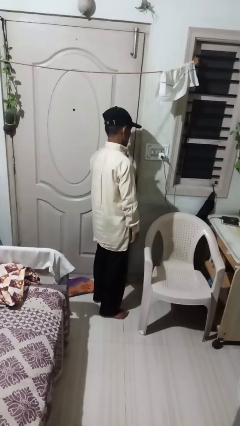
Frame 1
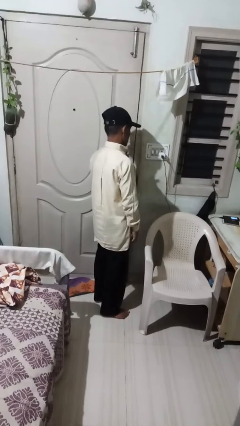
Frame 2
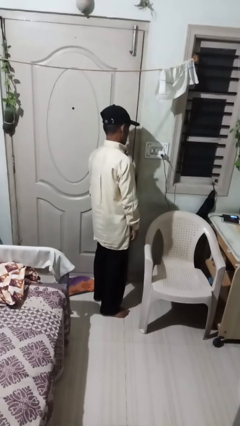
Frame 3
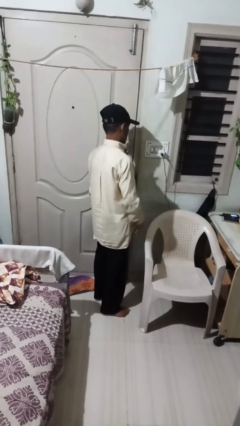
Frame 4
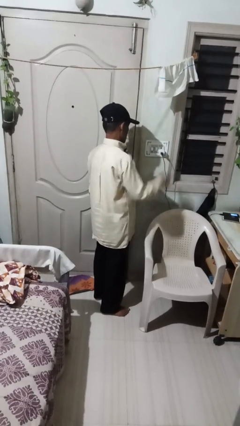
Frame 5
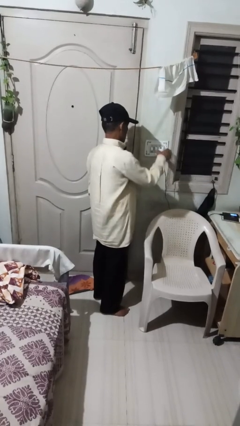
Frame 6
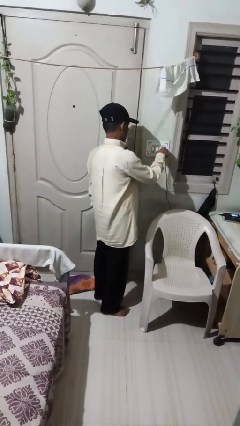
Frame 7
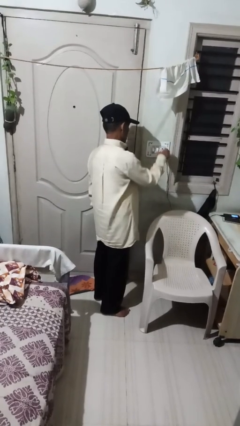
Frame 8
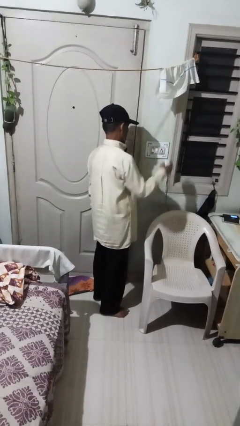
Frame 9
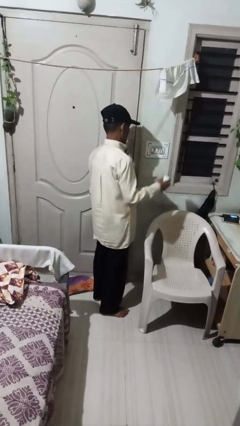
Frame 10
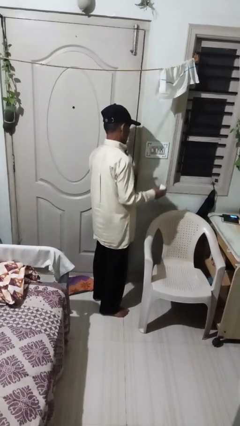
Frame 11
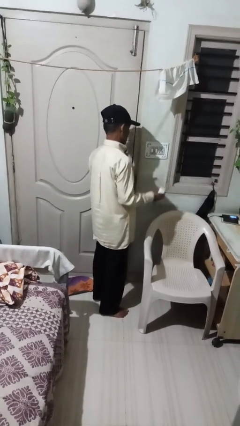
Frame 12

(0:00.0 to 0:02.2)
person unplugs from electrical socket

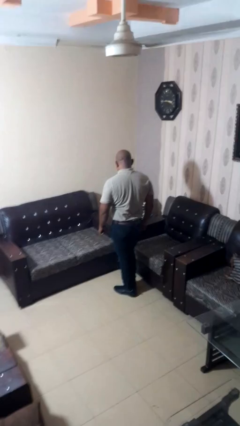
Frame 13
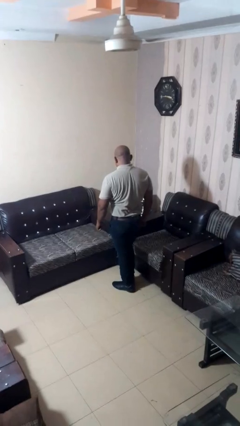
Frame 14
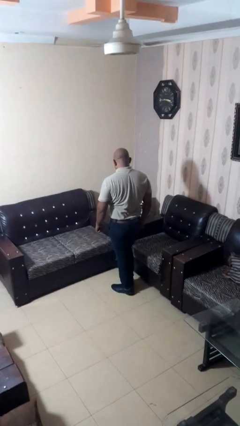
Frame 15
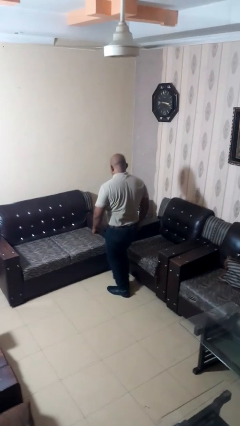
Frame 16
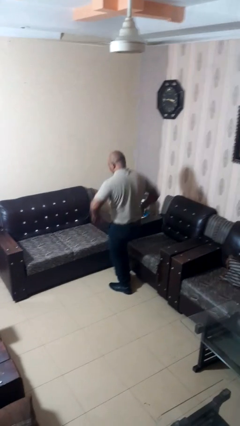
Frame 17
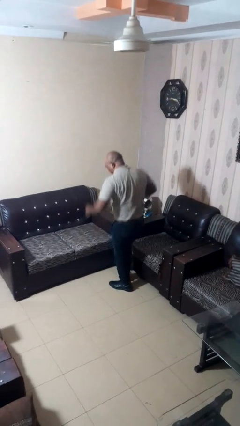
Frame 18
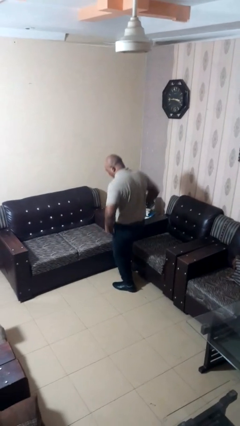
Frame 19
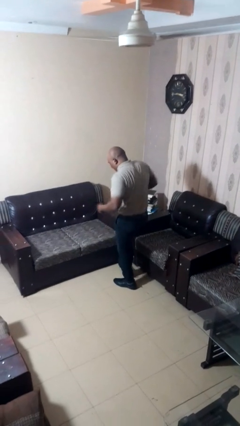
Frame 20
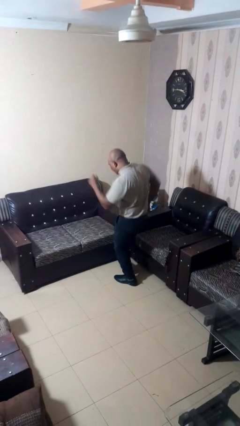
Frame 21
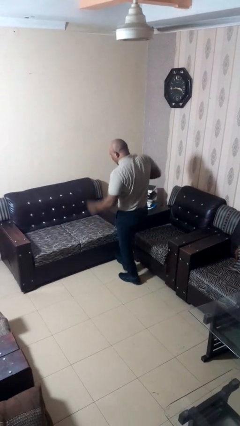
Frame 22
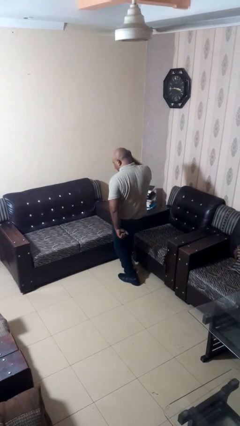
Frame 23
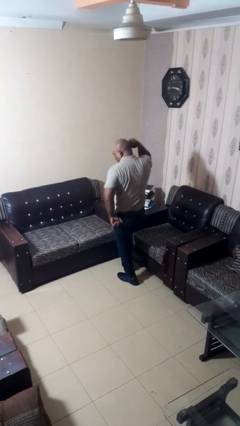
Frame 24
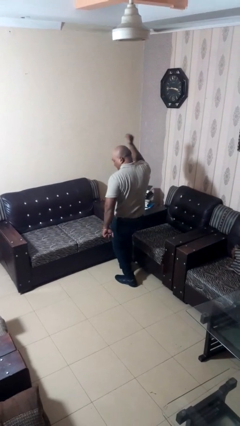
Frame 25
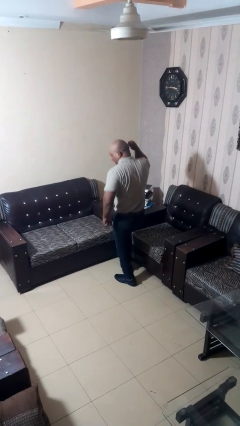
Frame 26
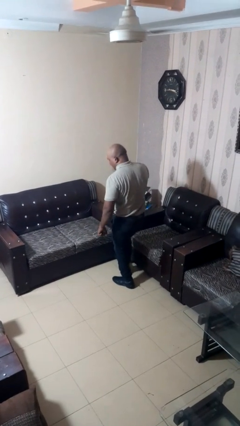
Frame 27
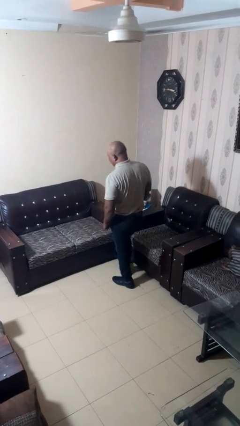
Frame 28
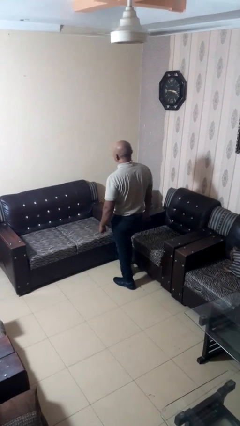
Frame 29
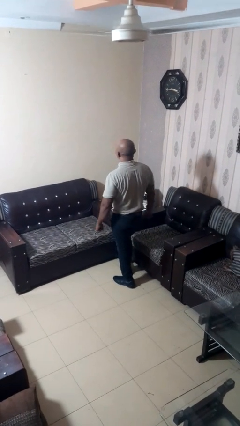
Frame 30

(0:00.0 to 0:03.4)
person dances in place

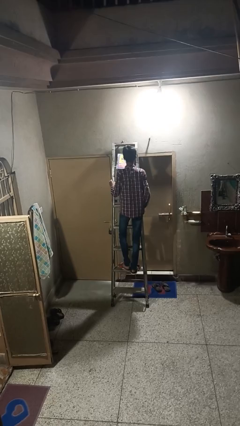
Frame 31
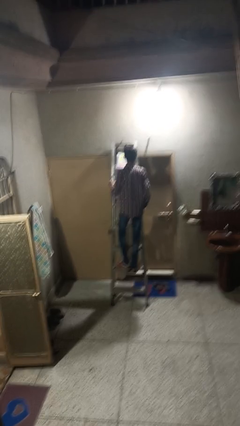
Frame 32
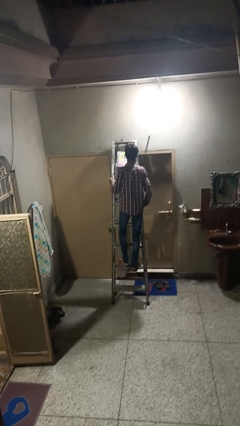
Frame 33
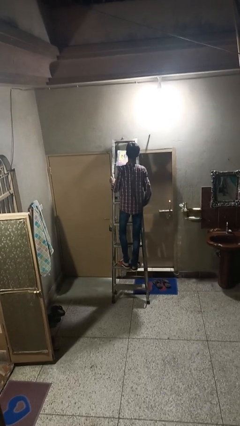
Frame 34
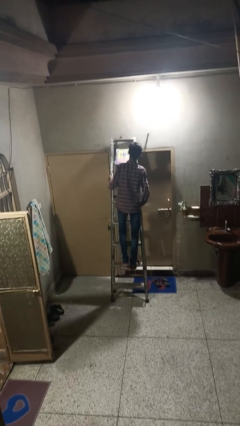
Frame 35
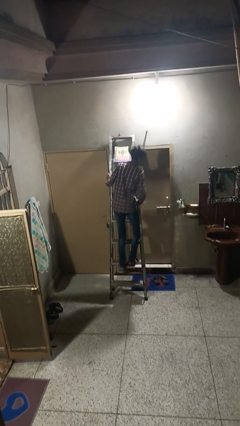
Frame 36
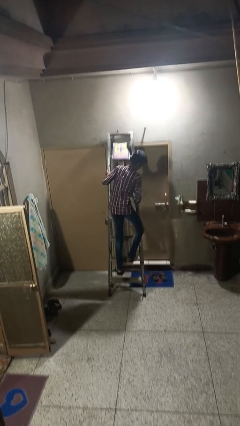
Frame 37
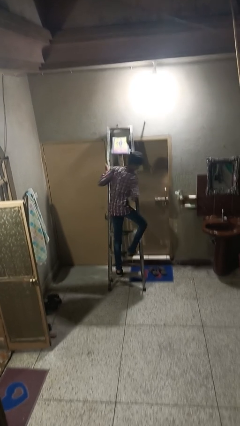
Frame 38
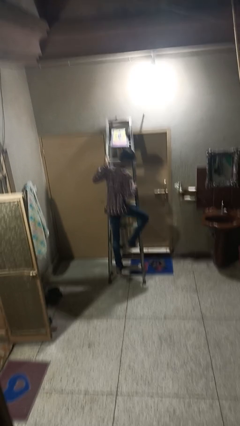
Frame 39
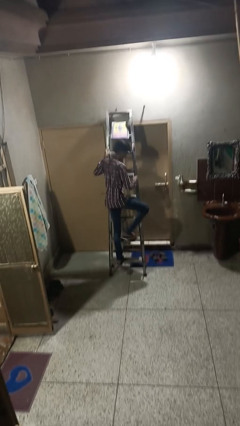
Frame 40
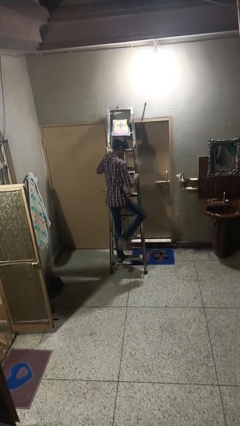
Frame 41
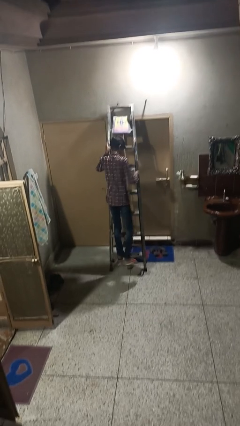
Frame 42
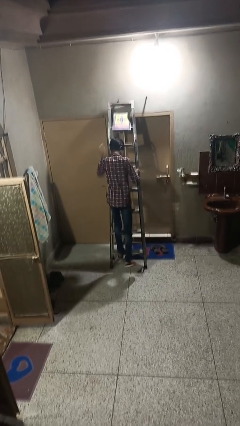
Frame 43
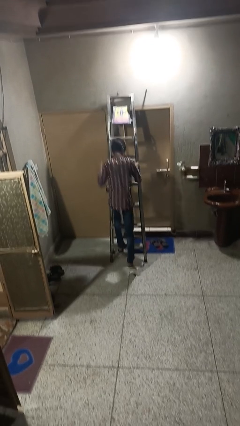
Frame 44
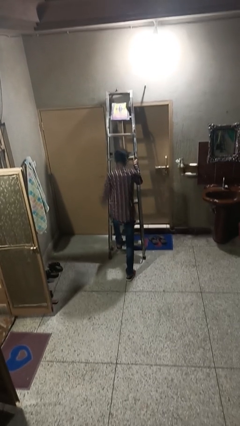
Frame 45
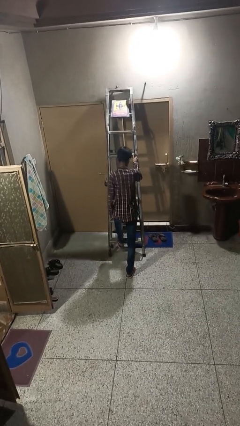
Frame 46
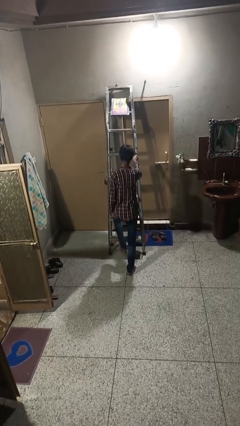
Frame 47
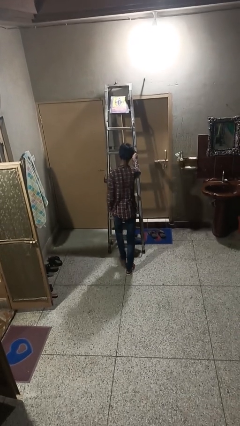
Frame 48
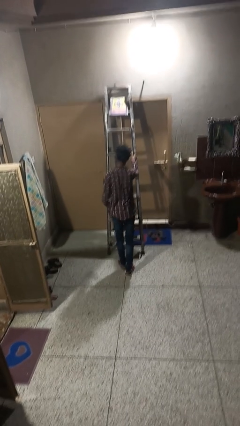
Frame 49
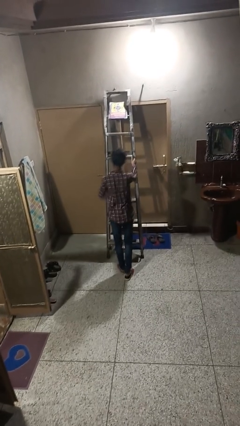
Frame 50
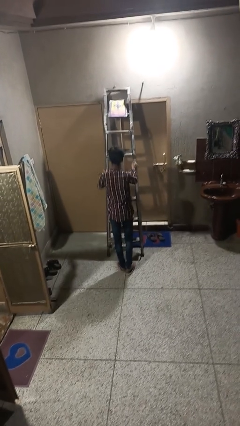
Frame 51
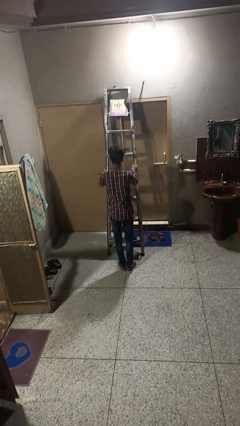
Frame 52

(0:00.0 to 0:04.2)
person climbs down ladder

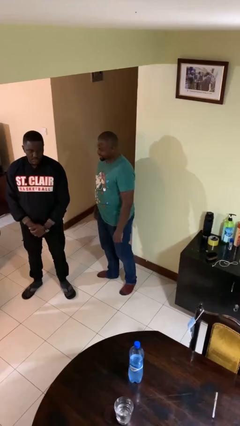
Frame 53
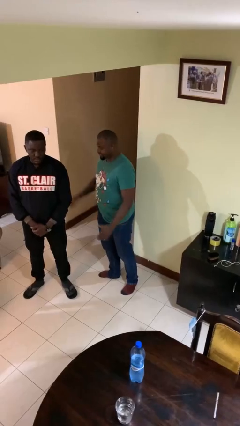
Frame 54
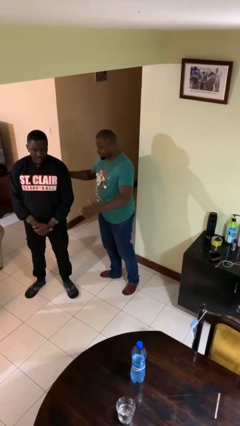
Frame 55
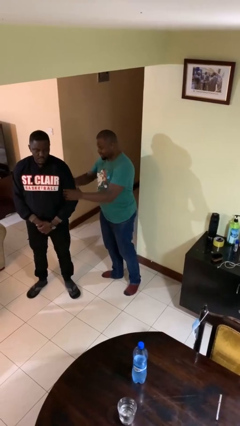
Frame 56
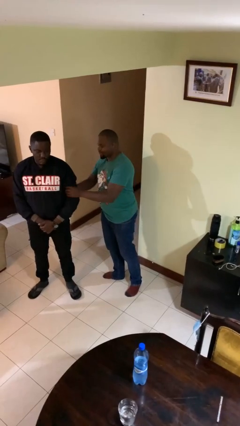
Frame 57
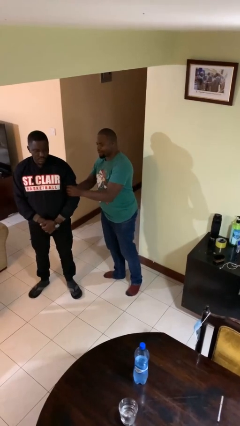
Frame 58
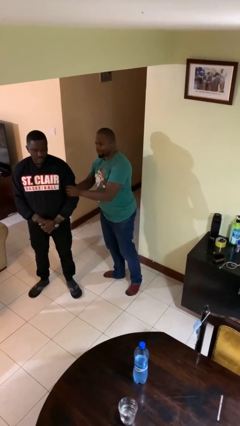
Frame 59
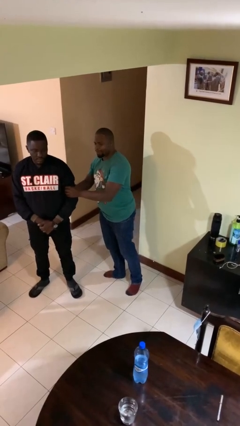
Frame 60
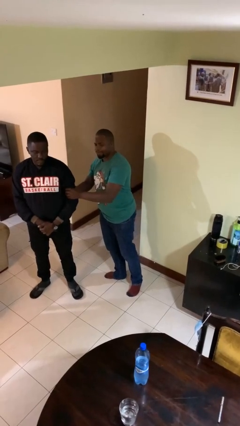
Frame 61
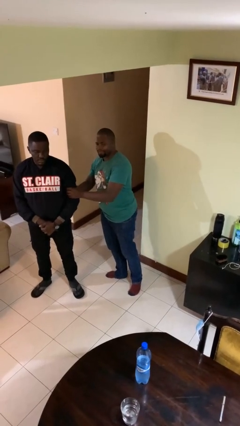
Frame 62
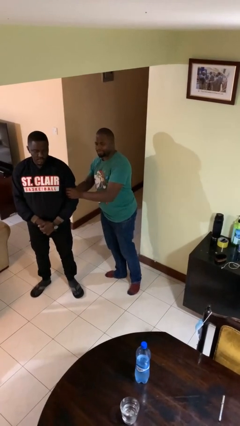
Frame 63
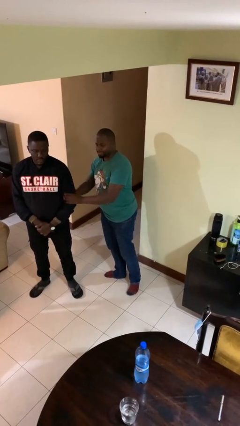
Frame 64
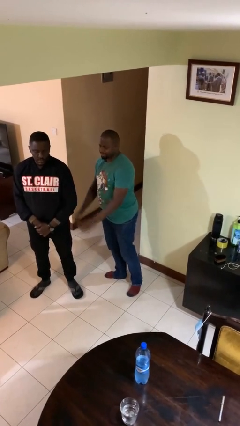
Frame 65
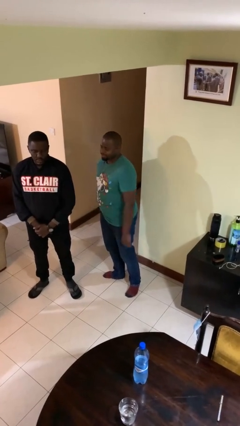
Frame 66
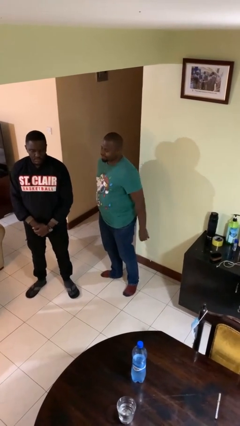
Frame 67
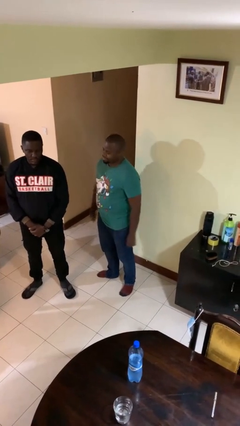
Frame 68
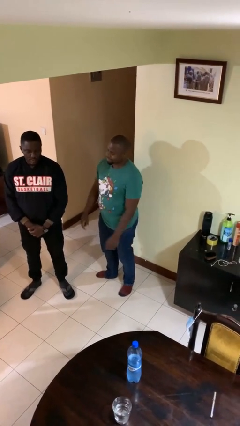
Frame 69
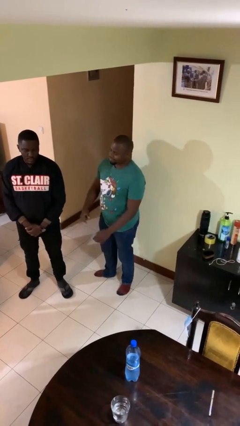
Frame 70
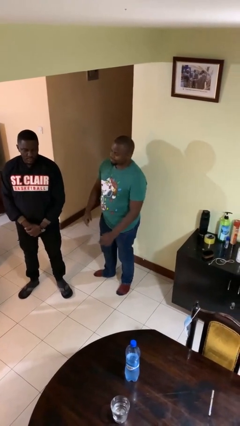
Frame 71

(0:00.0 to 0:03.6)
person grabs person by bicep

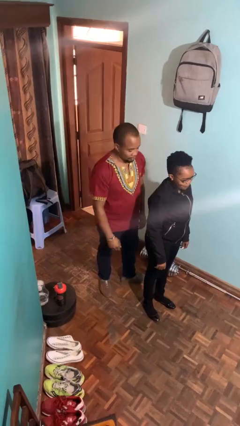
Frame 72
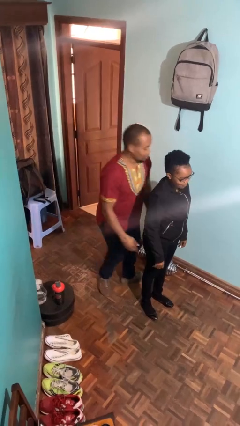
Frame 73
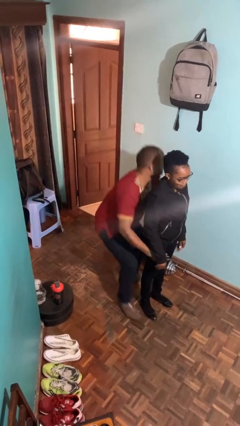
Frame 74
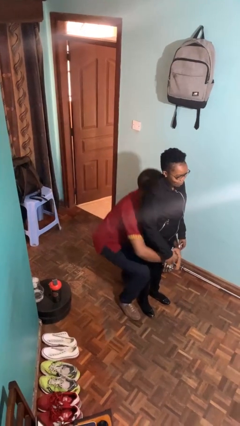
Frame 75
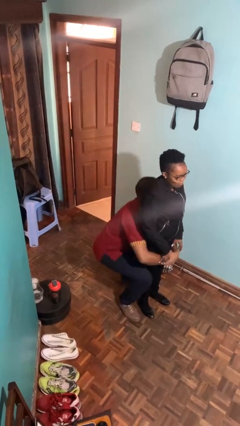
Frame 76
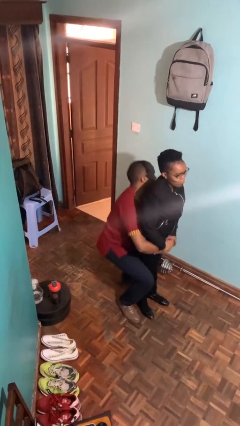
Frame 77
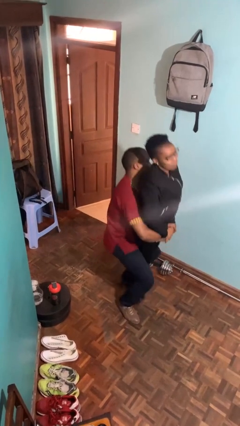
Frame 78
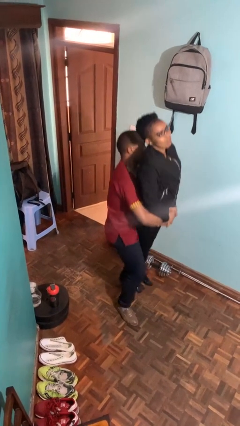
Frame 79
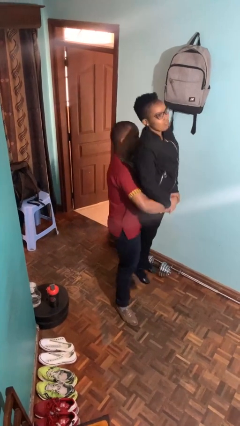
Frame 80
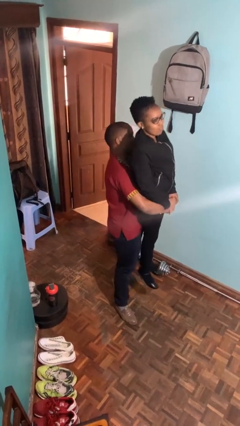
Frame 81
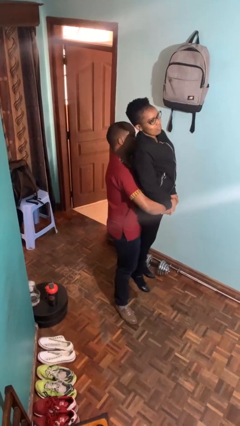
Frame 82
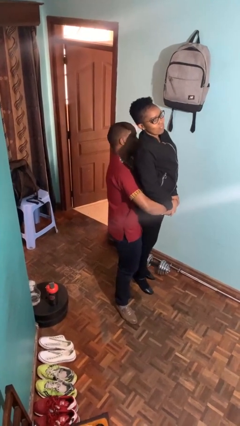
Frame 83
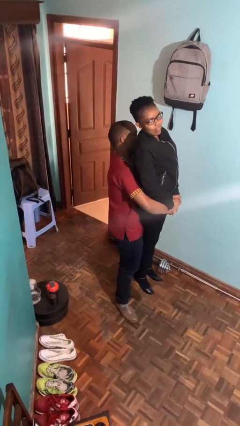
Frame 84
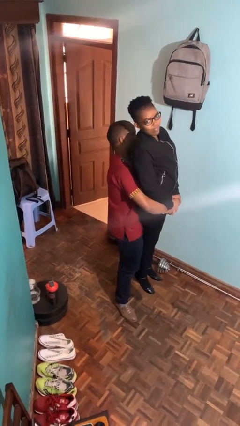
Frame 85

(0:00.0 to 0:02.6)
person picks up person

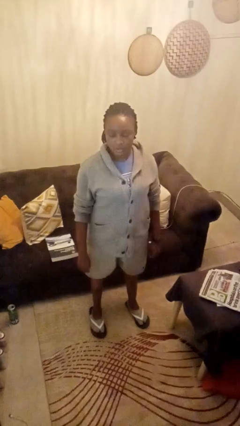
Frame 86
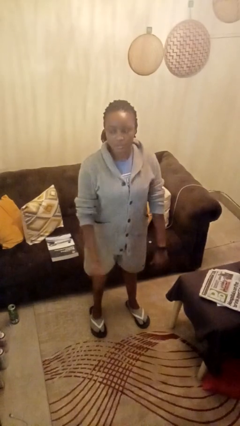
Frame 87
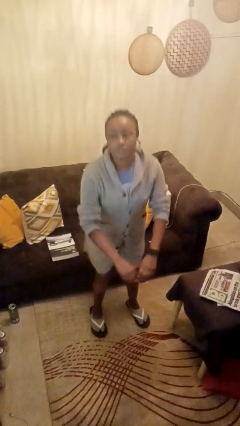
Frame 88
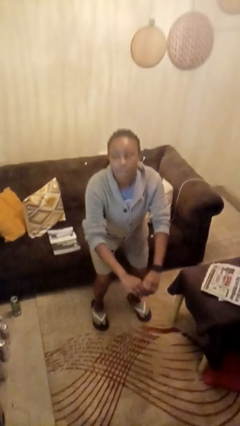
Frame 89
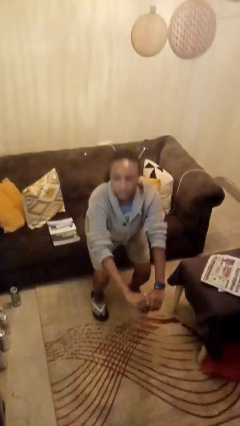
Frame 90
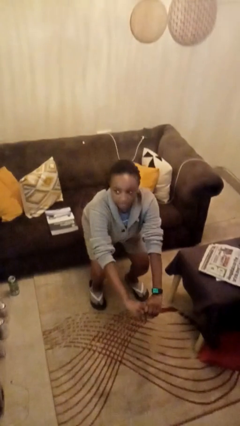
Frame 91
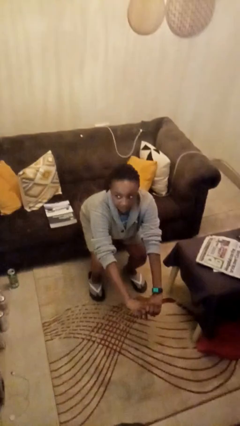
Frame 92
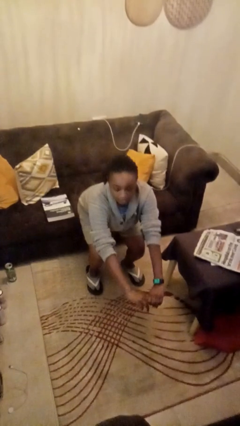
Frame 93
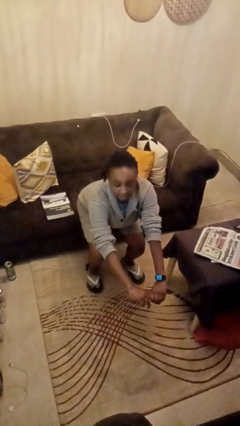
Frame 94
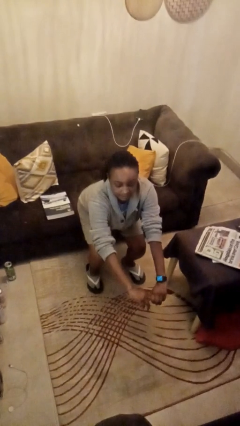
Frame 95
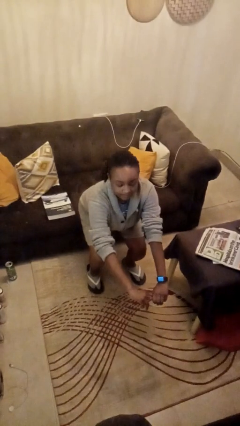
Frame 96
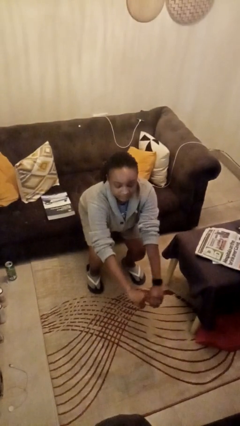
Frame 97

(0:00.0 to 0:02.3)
person squats
